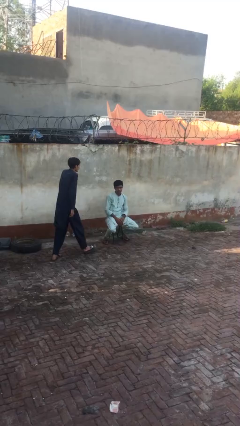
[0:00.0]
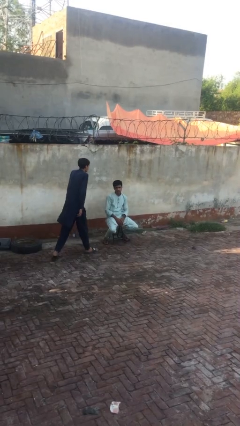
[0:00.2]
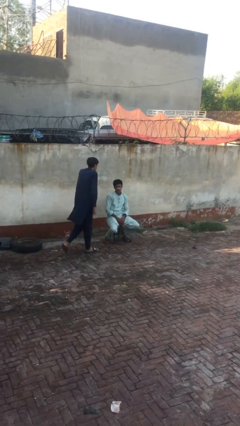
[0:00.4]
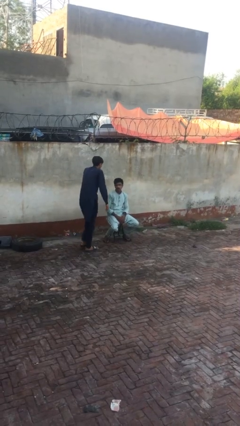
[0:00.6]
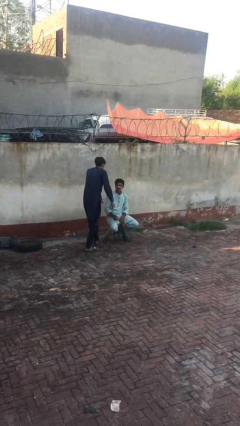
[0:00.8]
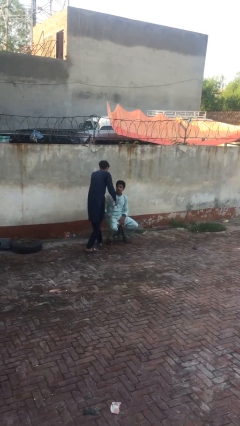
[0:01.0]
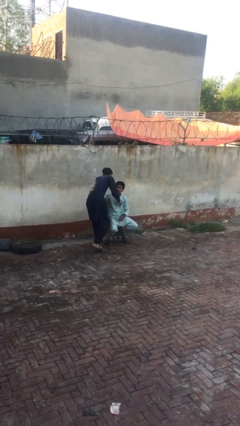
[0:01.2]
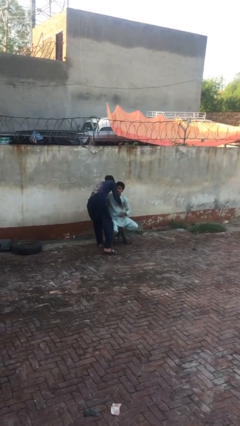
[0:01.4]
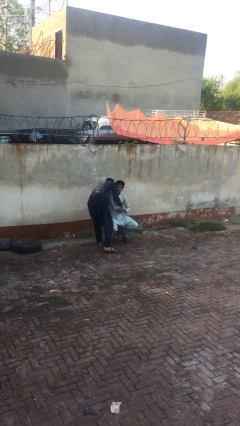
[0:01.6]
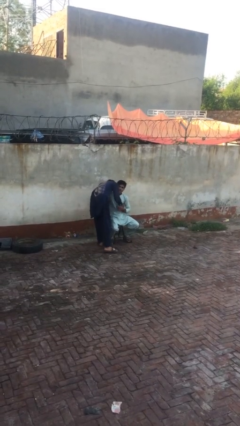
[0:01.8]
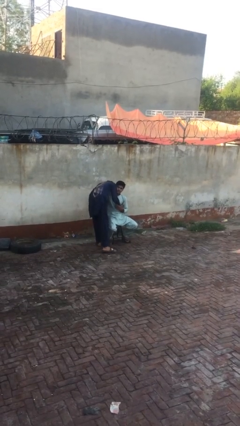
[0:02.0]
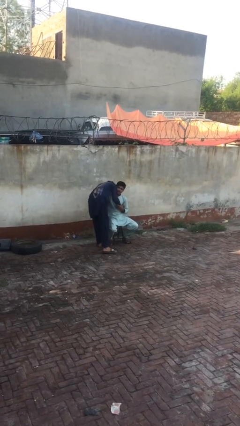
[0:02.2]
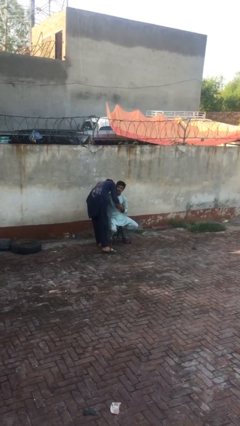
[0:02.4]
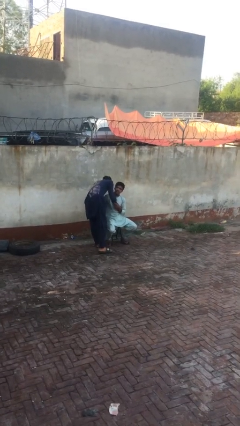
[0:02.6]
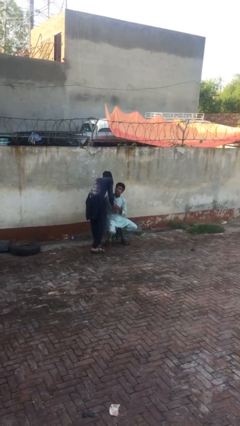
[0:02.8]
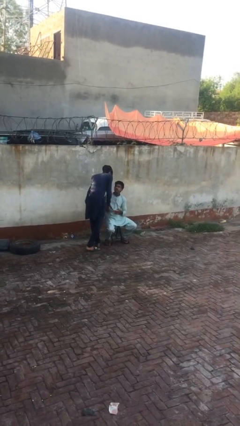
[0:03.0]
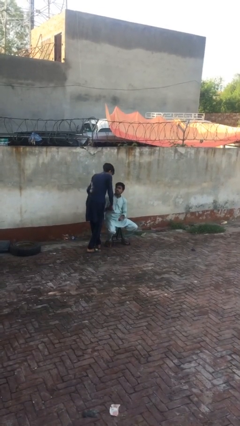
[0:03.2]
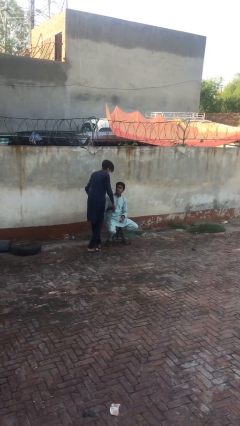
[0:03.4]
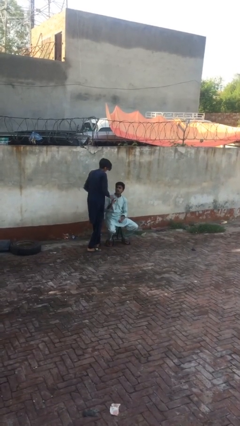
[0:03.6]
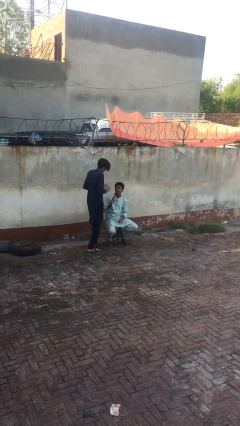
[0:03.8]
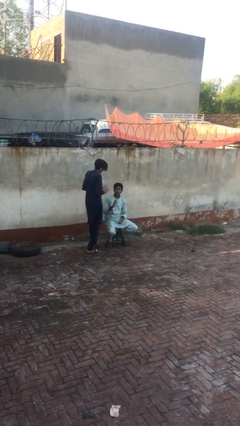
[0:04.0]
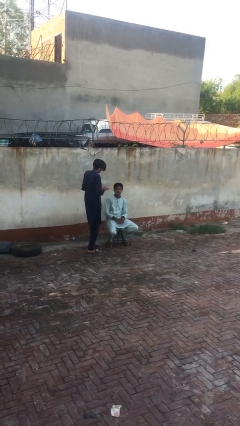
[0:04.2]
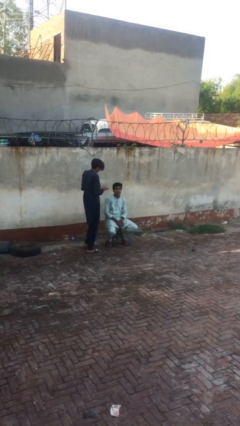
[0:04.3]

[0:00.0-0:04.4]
person embraces person

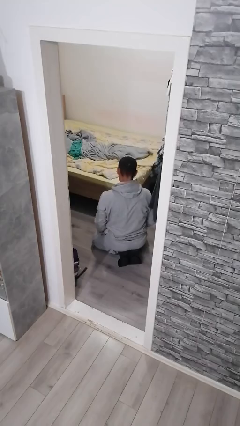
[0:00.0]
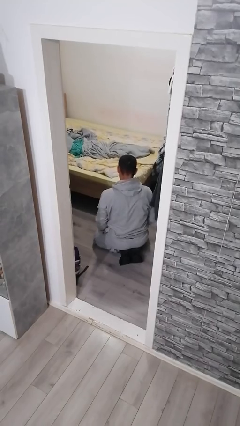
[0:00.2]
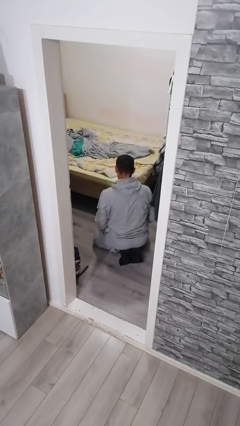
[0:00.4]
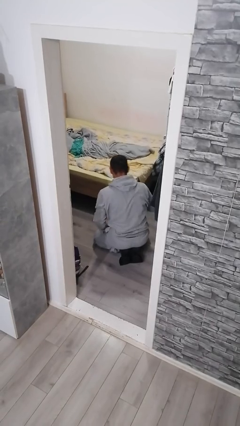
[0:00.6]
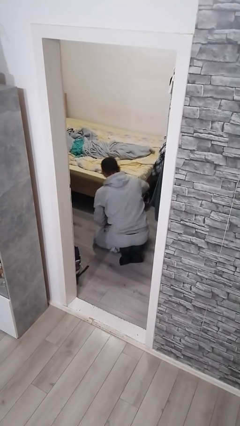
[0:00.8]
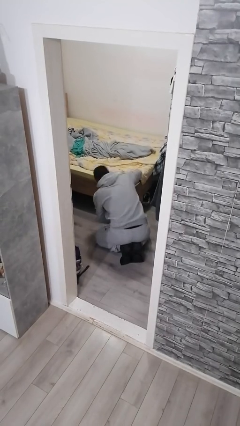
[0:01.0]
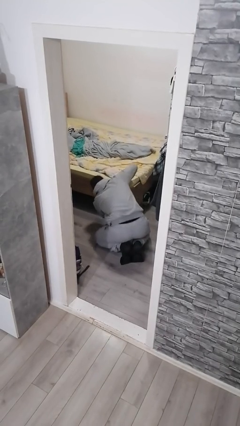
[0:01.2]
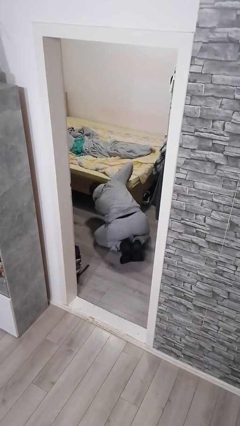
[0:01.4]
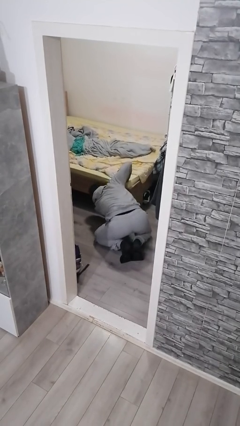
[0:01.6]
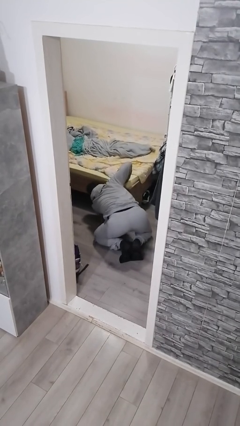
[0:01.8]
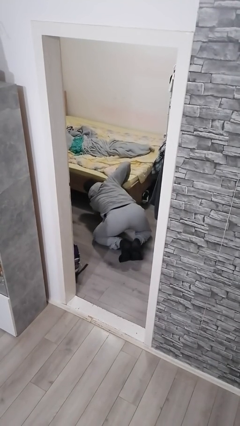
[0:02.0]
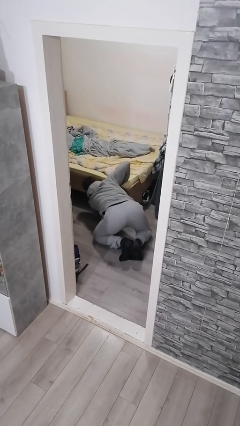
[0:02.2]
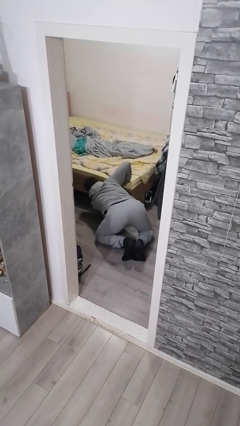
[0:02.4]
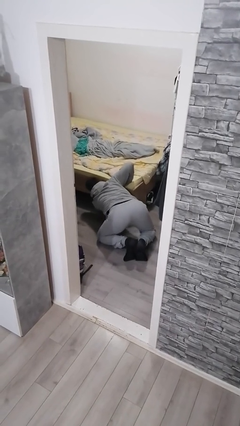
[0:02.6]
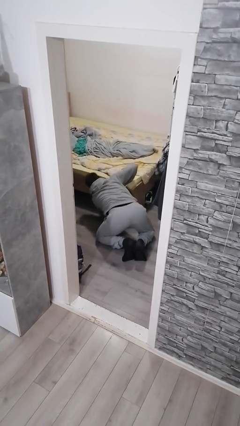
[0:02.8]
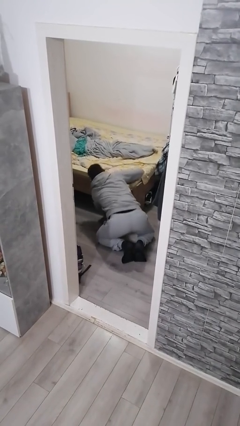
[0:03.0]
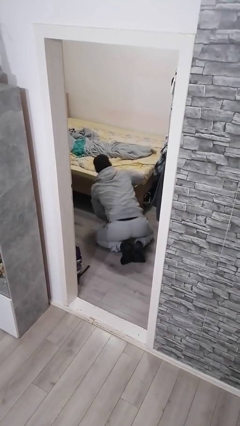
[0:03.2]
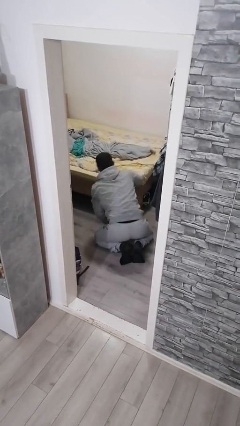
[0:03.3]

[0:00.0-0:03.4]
person searches under bed

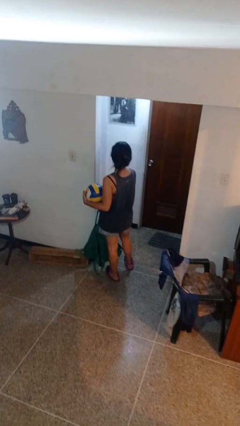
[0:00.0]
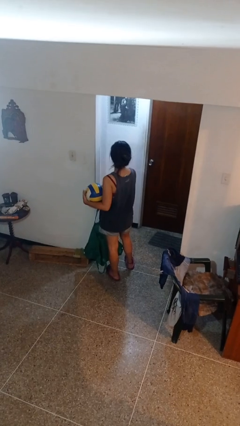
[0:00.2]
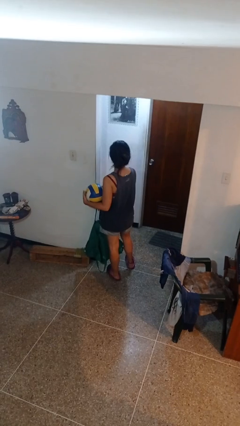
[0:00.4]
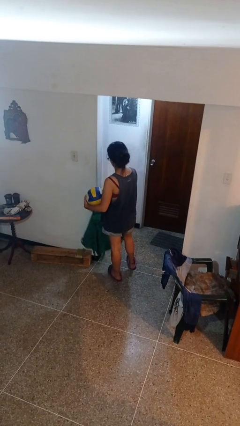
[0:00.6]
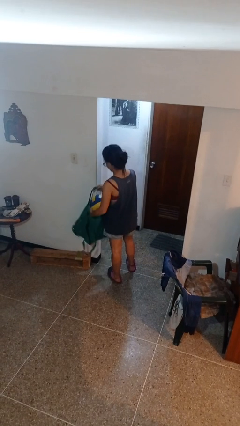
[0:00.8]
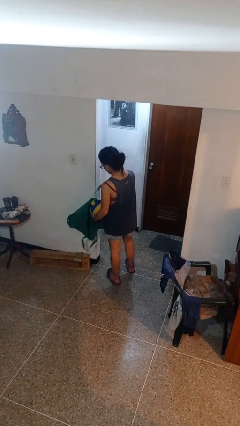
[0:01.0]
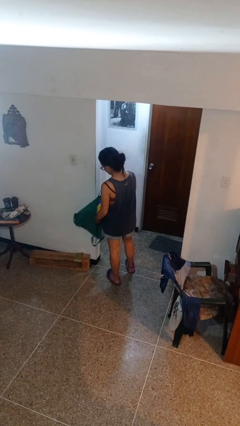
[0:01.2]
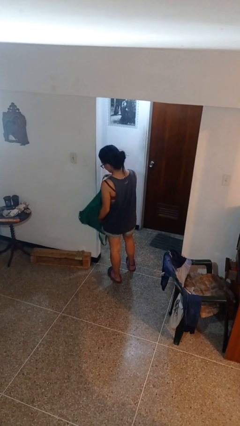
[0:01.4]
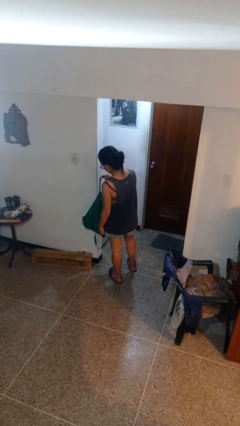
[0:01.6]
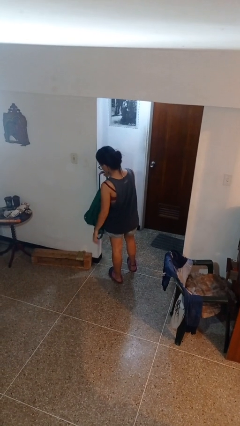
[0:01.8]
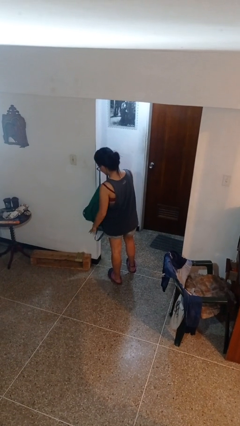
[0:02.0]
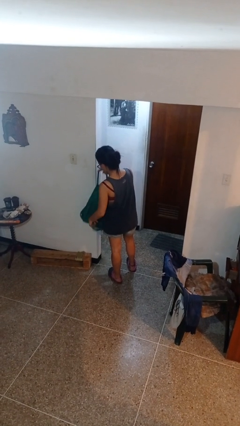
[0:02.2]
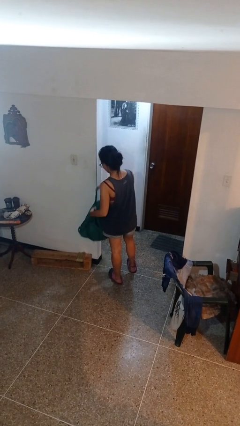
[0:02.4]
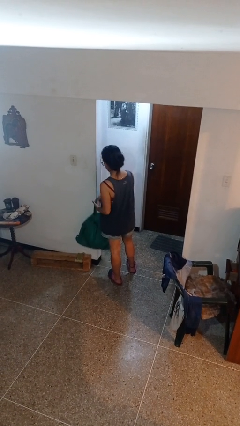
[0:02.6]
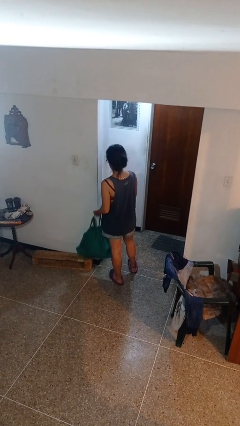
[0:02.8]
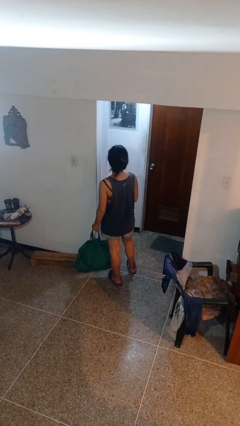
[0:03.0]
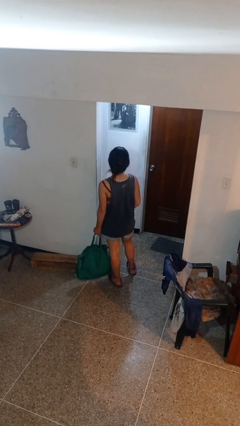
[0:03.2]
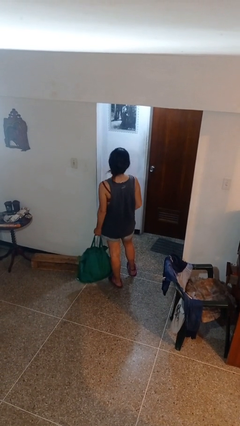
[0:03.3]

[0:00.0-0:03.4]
person puts object into bag

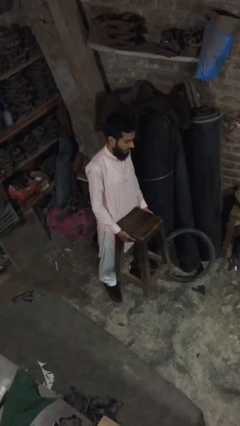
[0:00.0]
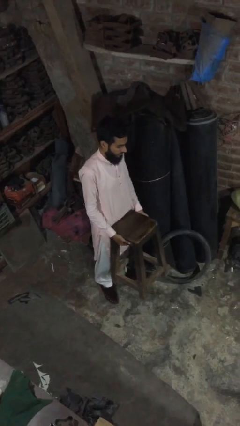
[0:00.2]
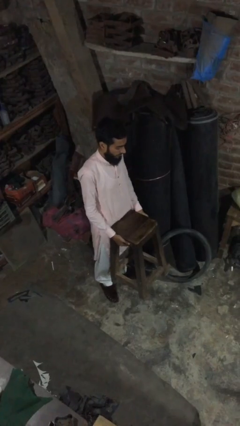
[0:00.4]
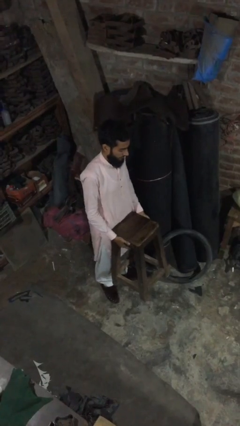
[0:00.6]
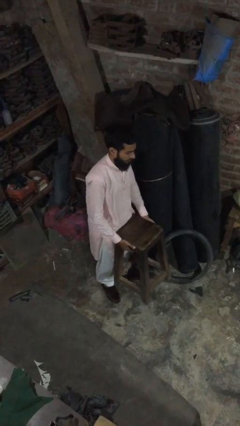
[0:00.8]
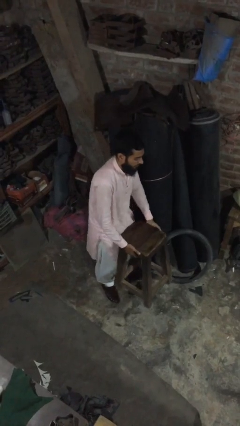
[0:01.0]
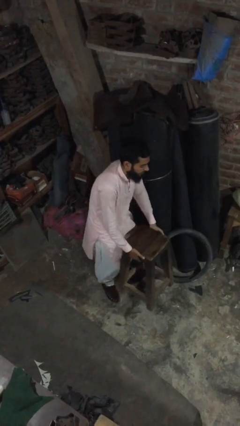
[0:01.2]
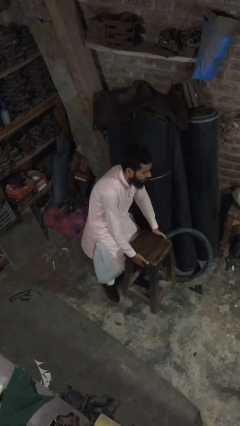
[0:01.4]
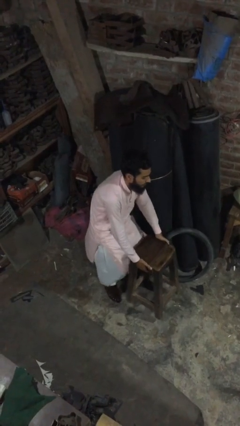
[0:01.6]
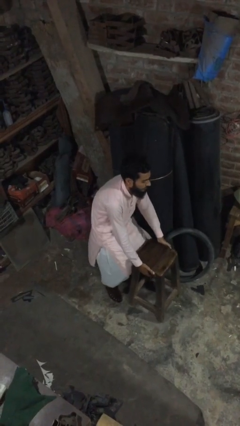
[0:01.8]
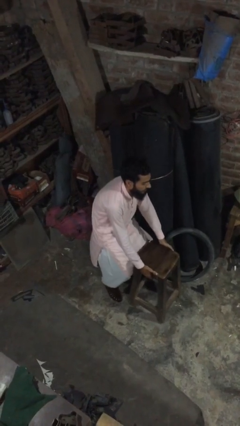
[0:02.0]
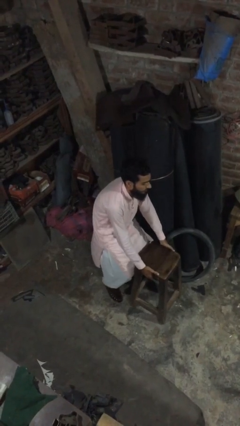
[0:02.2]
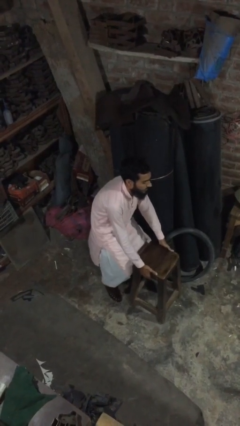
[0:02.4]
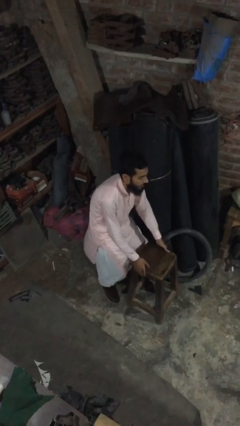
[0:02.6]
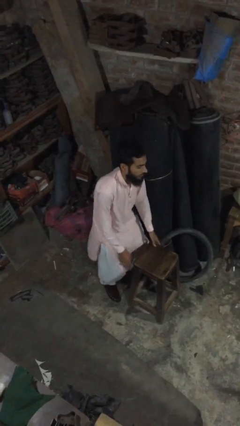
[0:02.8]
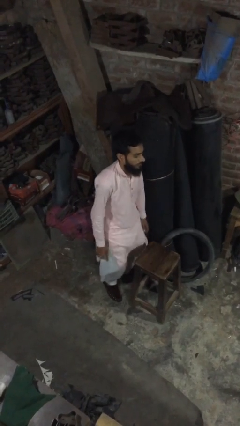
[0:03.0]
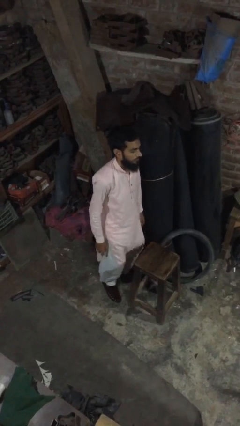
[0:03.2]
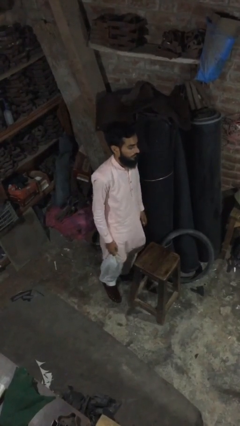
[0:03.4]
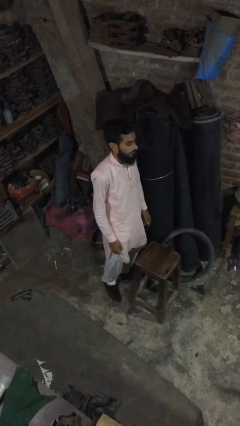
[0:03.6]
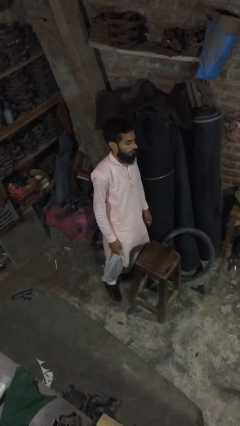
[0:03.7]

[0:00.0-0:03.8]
person puts down object on floor

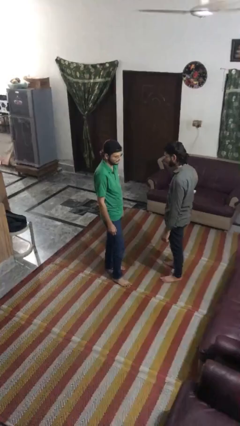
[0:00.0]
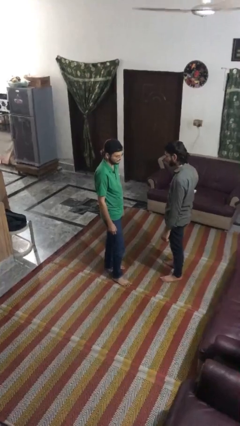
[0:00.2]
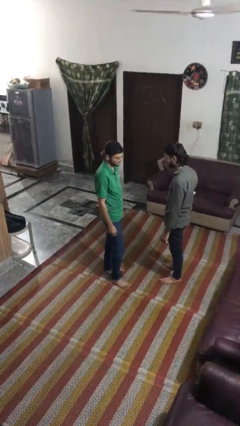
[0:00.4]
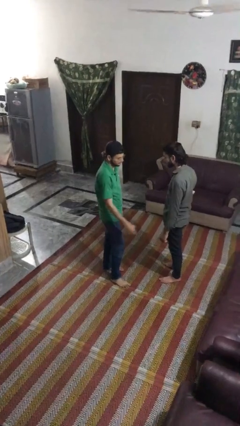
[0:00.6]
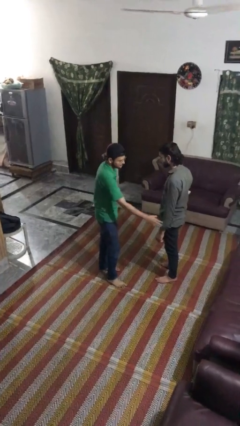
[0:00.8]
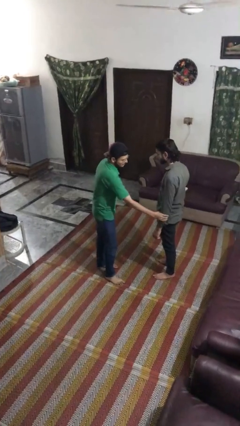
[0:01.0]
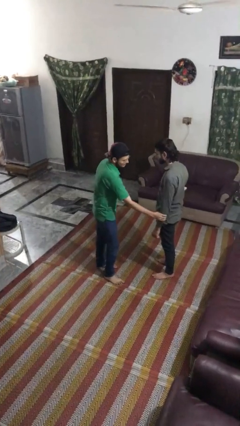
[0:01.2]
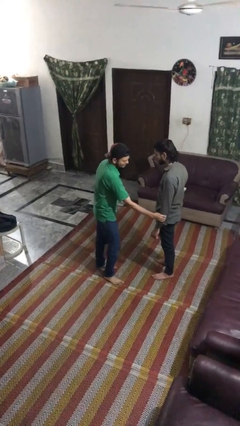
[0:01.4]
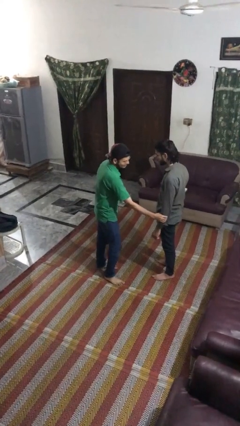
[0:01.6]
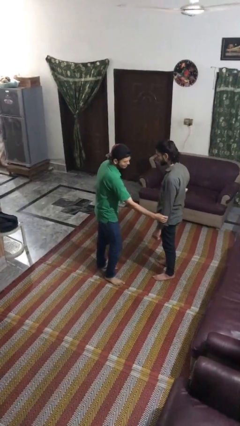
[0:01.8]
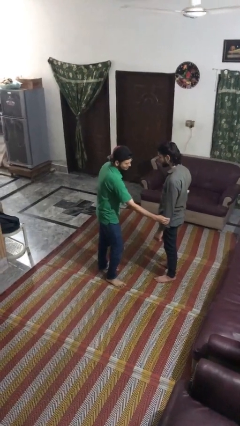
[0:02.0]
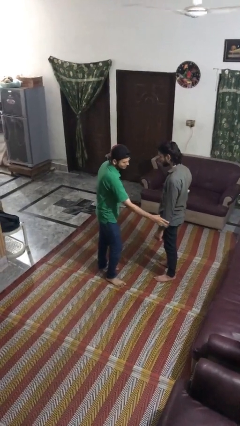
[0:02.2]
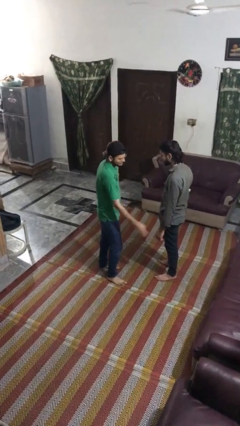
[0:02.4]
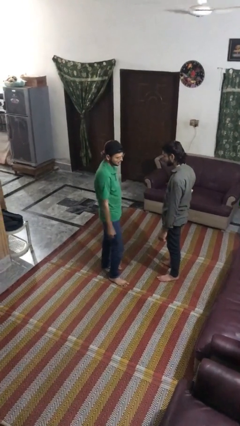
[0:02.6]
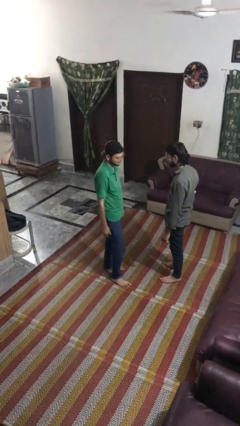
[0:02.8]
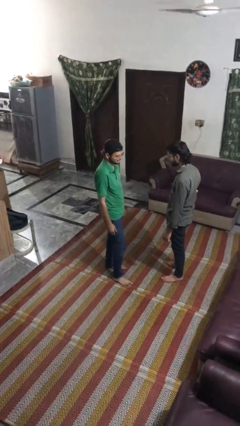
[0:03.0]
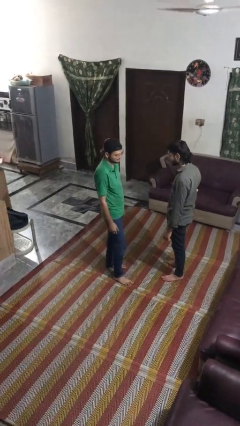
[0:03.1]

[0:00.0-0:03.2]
person grabs person by forearm
